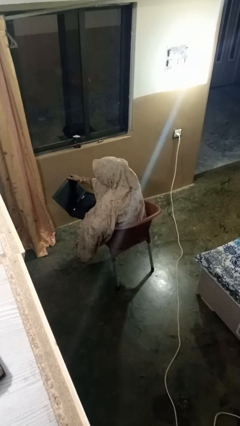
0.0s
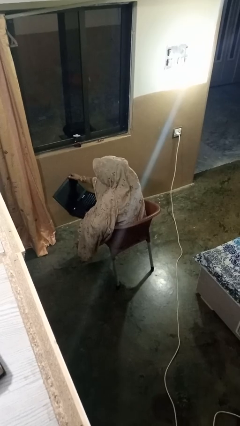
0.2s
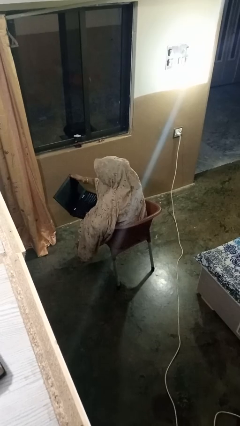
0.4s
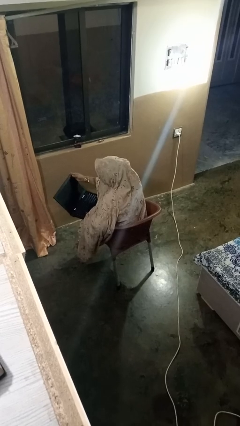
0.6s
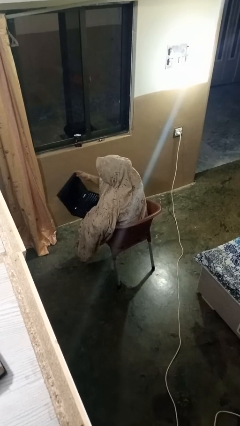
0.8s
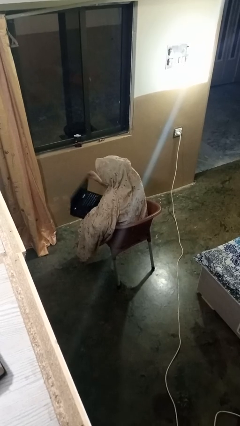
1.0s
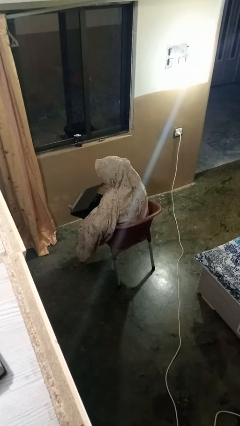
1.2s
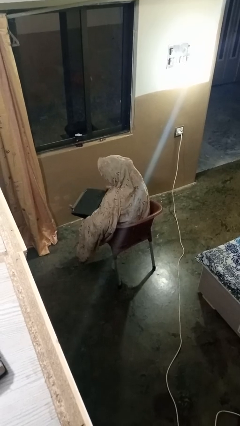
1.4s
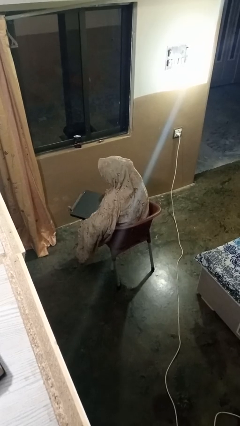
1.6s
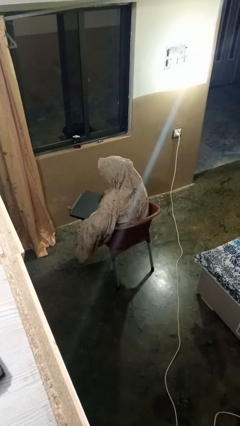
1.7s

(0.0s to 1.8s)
person closes laptop

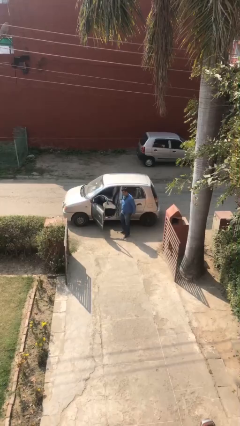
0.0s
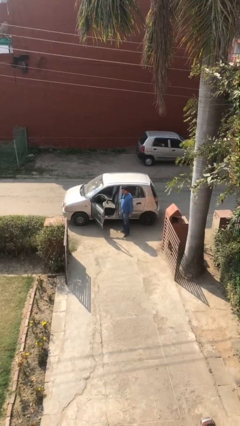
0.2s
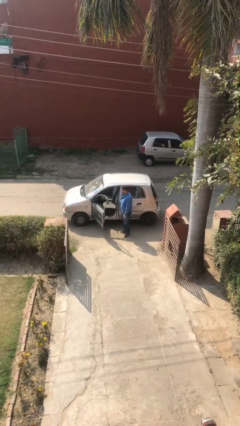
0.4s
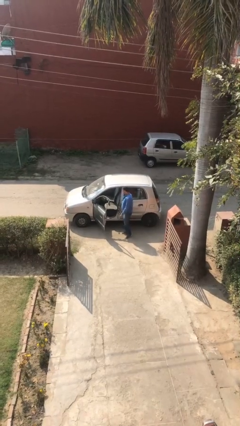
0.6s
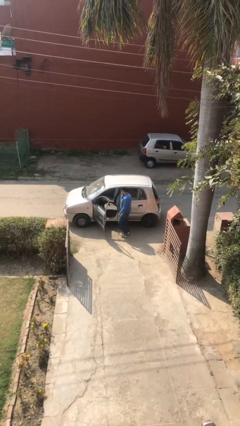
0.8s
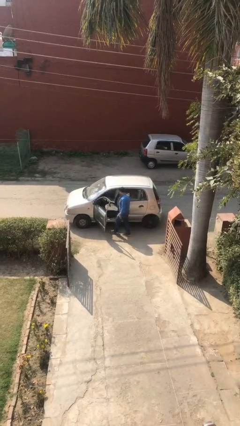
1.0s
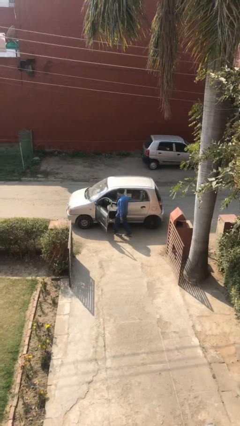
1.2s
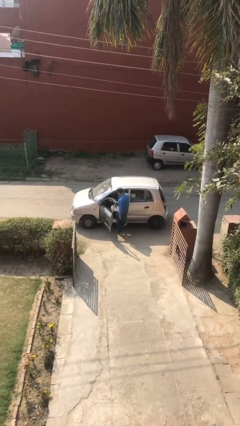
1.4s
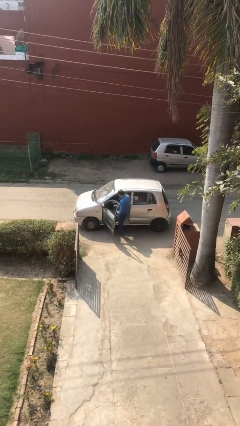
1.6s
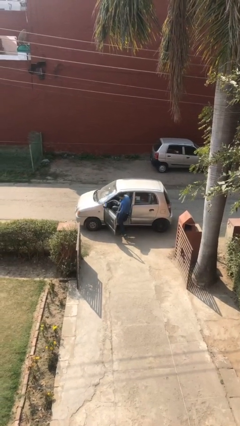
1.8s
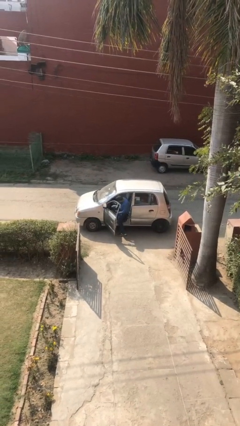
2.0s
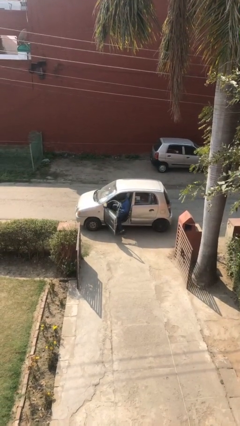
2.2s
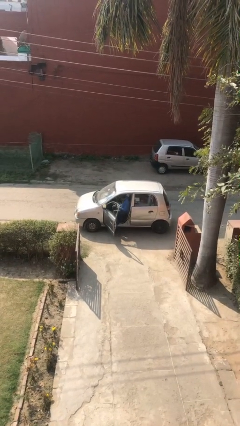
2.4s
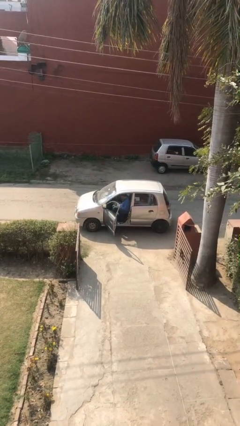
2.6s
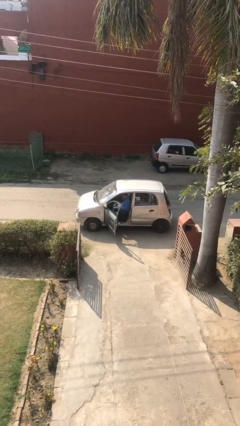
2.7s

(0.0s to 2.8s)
person enters car

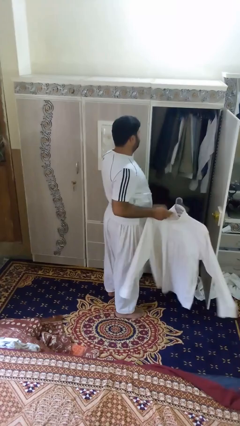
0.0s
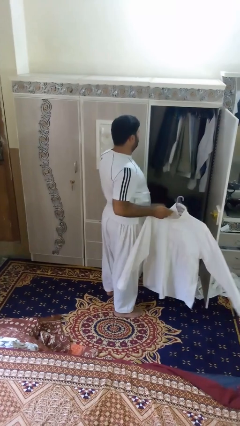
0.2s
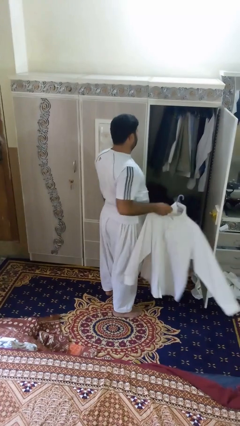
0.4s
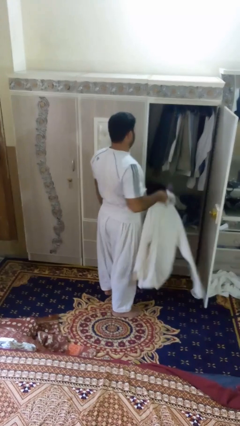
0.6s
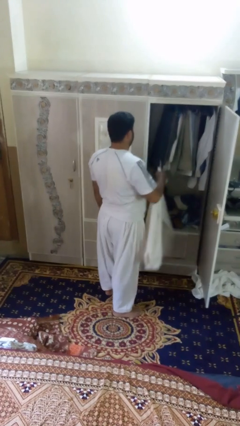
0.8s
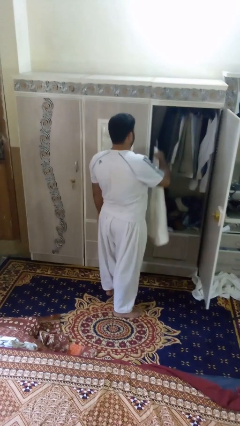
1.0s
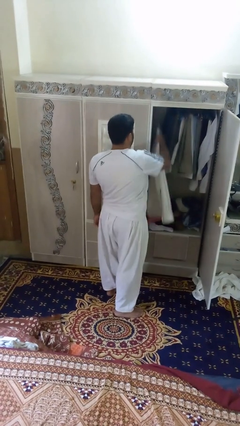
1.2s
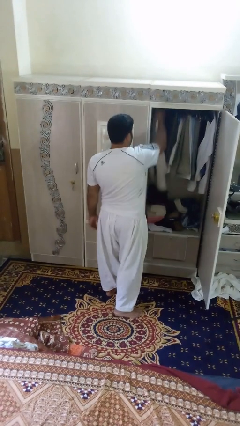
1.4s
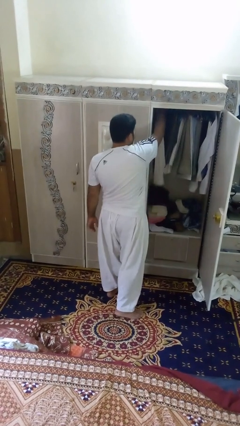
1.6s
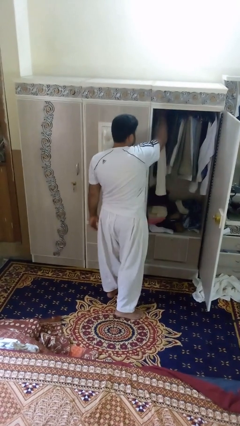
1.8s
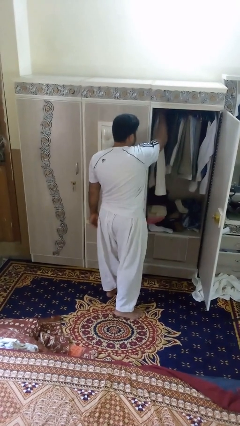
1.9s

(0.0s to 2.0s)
person puts clothes into closet

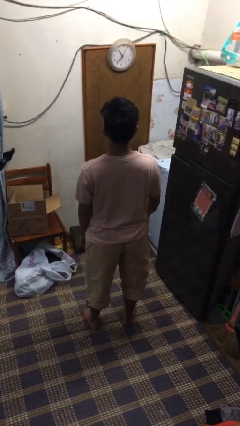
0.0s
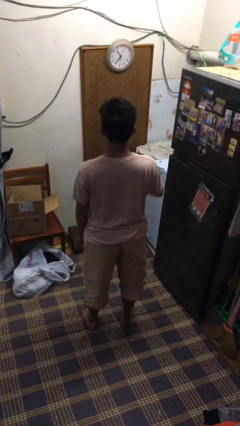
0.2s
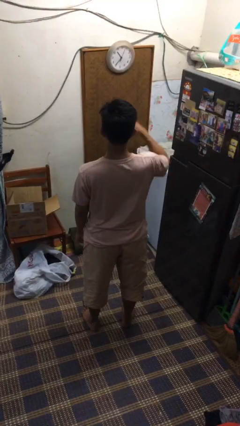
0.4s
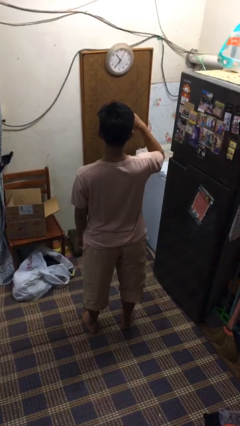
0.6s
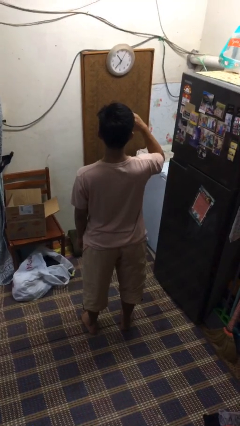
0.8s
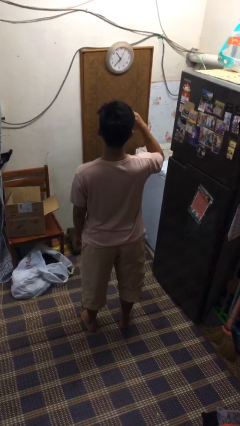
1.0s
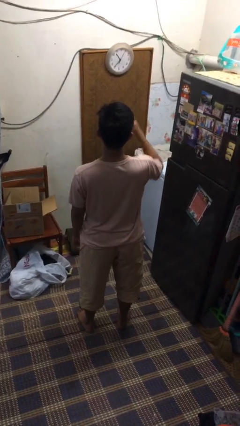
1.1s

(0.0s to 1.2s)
person salutes

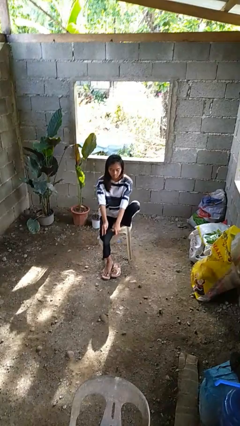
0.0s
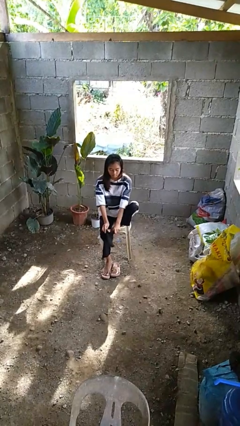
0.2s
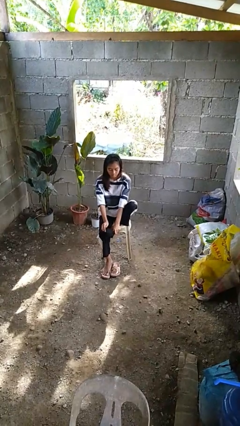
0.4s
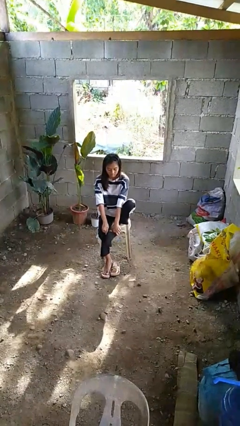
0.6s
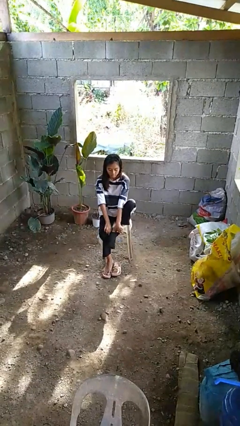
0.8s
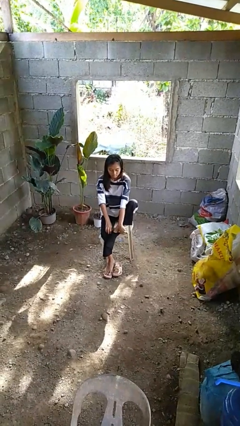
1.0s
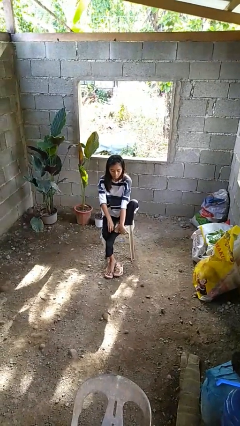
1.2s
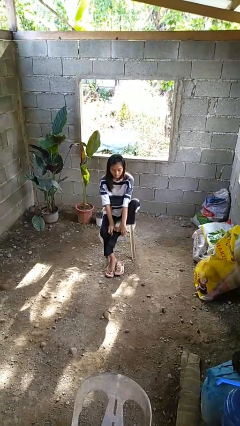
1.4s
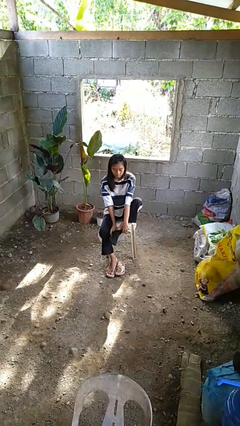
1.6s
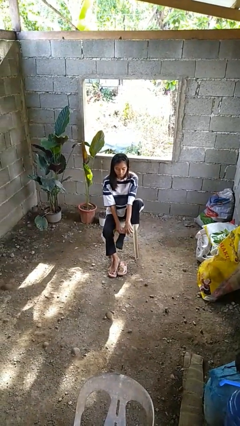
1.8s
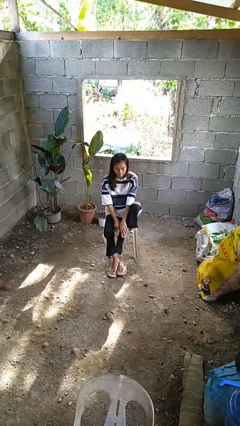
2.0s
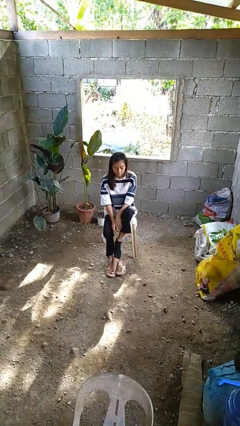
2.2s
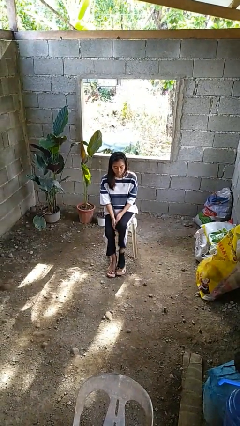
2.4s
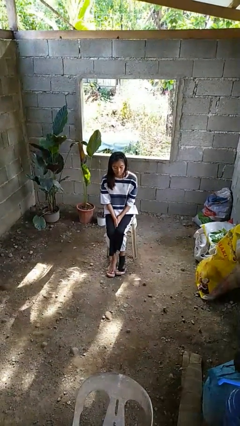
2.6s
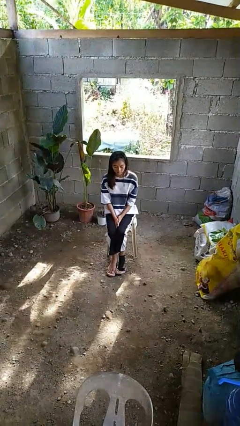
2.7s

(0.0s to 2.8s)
person puts on socks

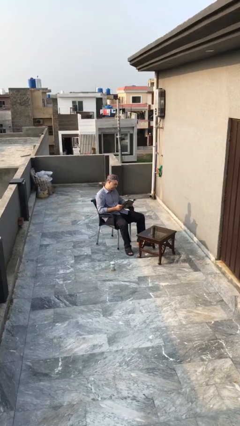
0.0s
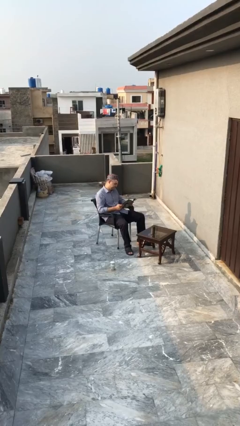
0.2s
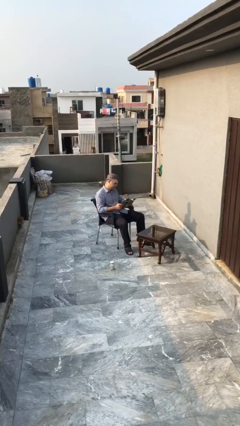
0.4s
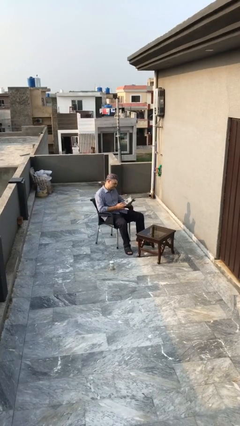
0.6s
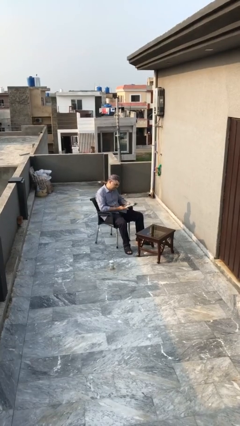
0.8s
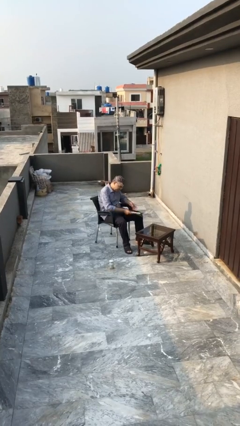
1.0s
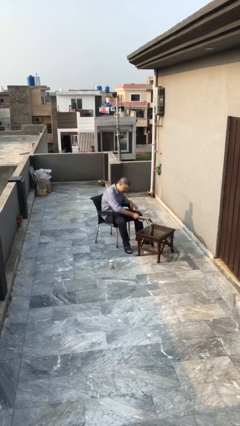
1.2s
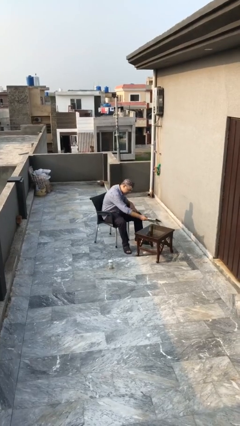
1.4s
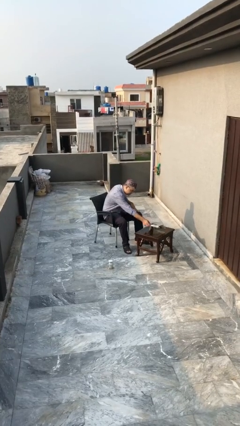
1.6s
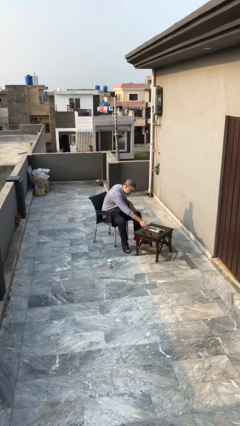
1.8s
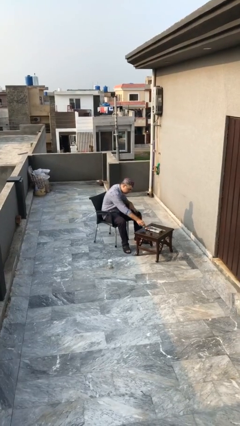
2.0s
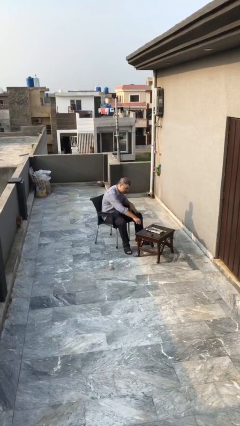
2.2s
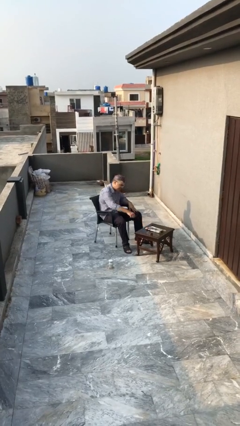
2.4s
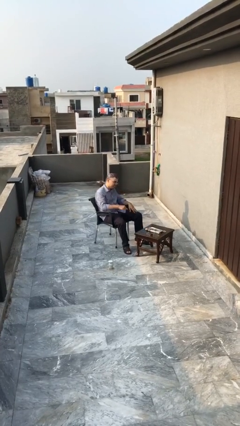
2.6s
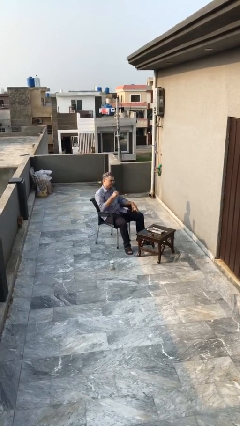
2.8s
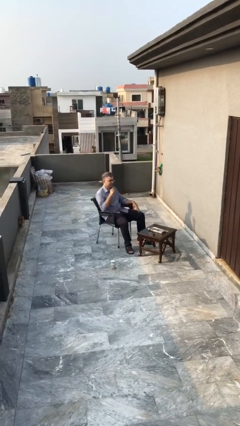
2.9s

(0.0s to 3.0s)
person puts down object on table

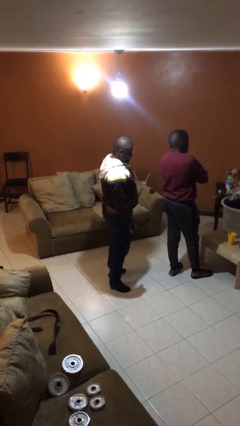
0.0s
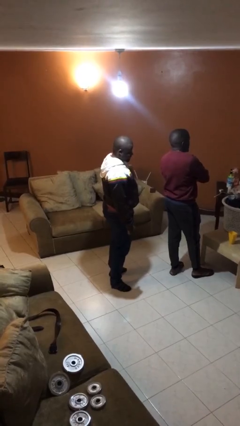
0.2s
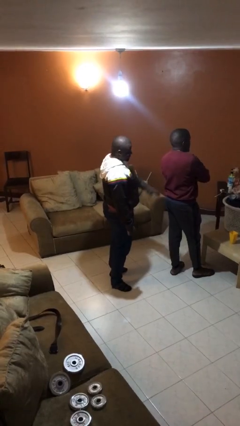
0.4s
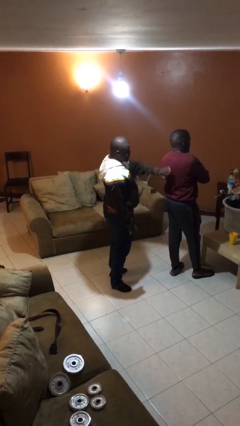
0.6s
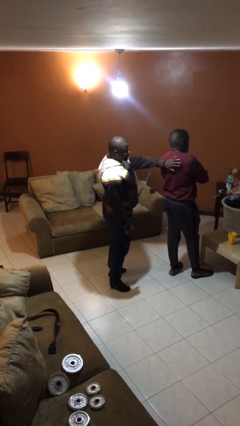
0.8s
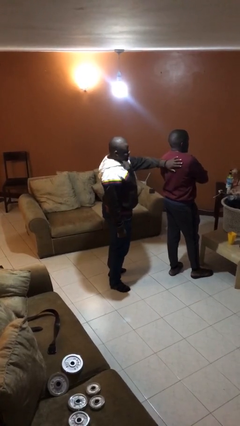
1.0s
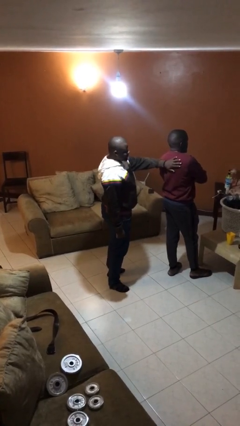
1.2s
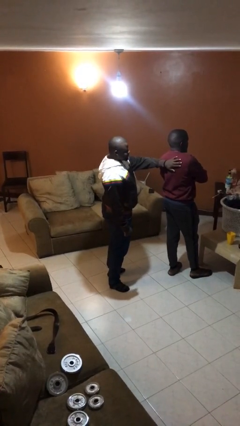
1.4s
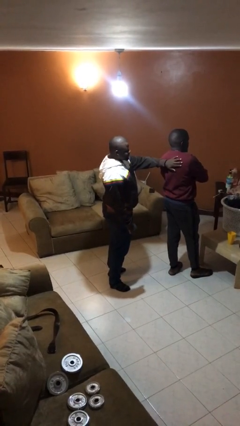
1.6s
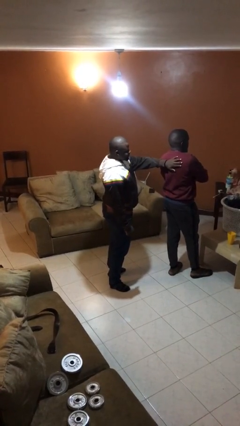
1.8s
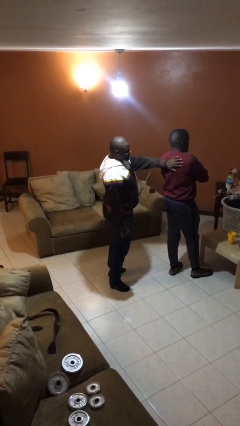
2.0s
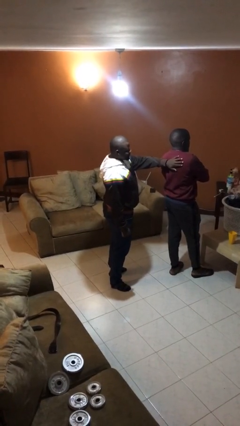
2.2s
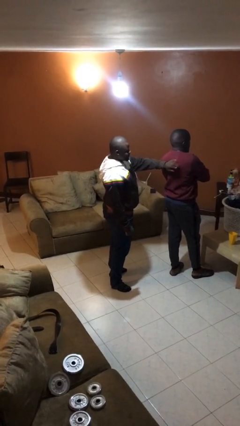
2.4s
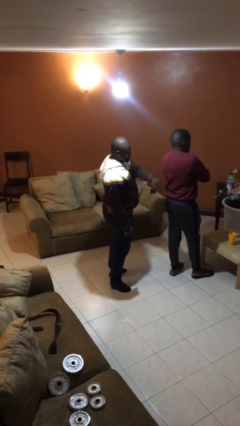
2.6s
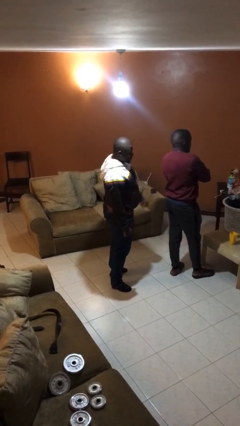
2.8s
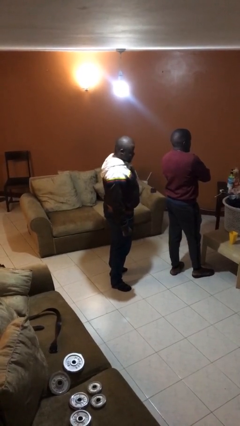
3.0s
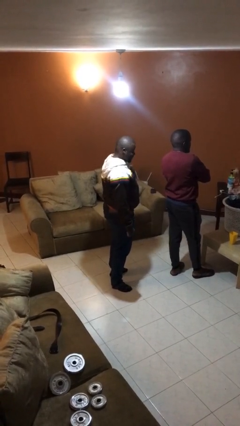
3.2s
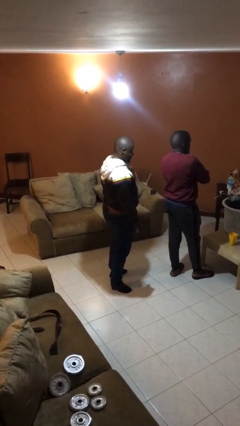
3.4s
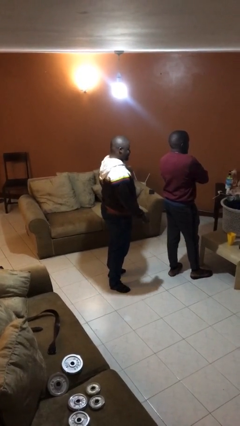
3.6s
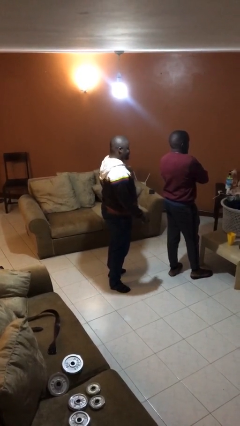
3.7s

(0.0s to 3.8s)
person touches back of person
